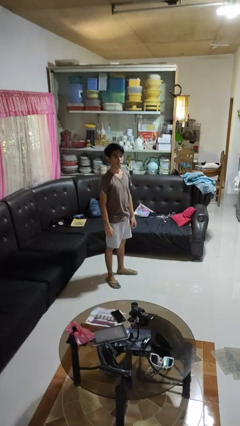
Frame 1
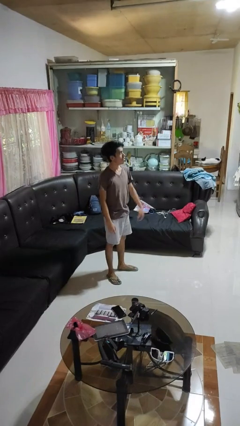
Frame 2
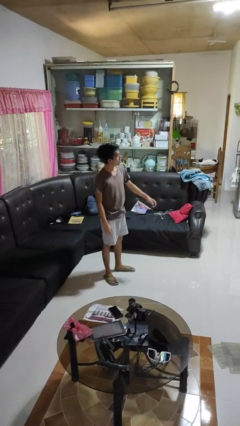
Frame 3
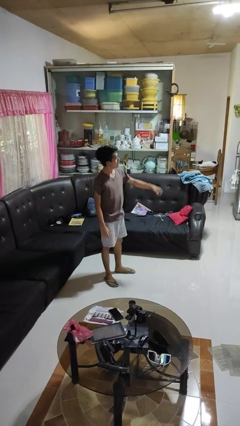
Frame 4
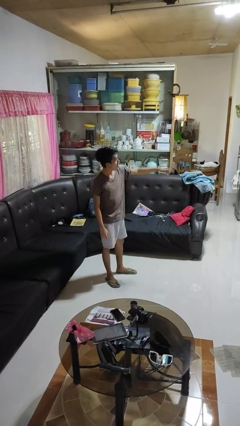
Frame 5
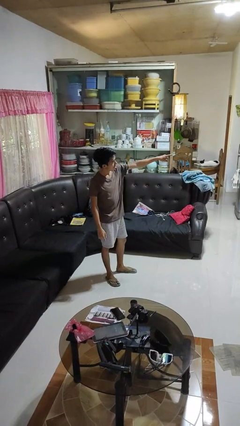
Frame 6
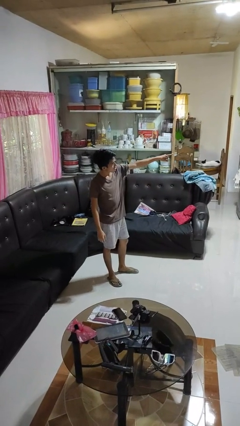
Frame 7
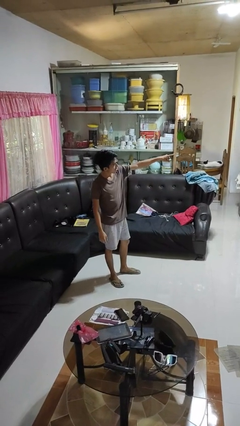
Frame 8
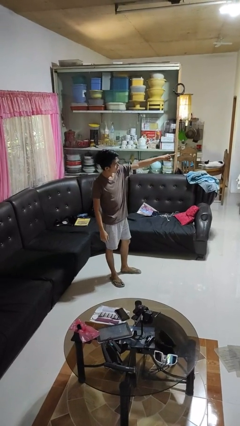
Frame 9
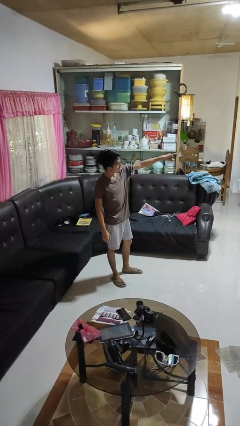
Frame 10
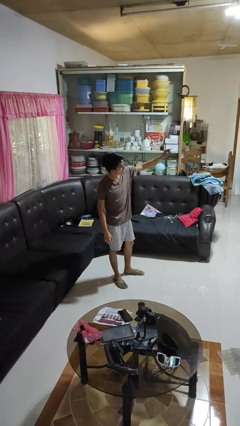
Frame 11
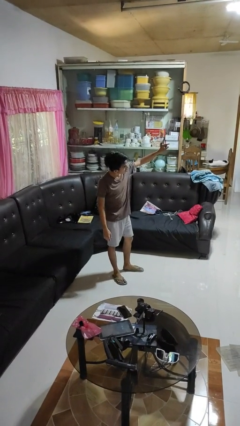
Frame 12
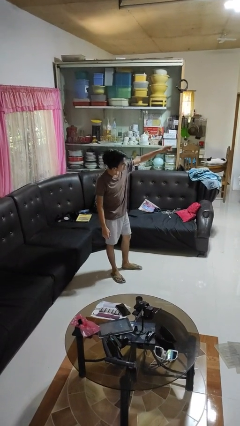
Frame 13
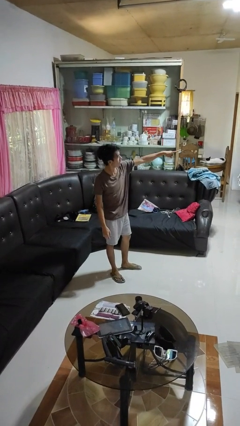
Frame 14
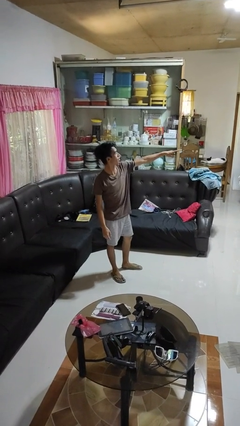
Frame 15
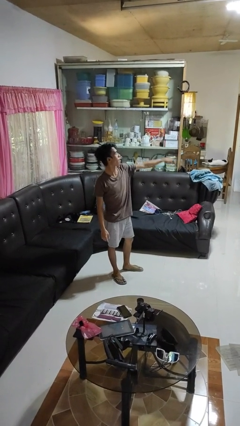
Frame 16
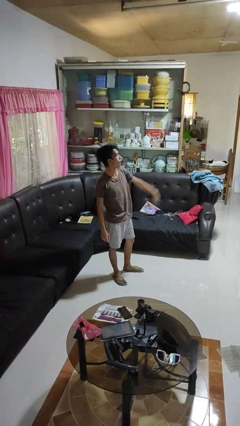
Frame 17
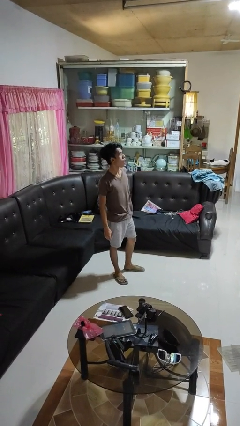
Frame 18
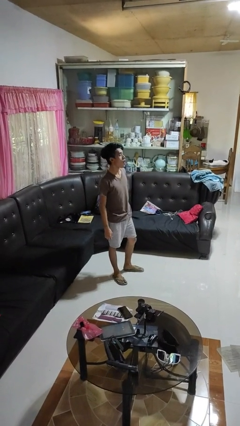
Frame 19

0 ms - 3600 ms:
person points at person

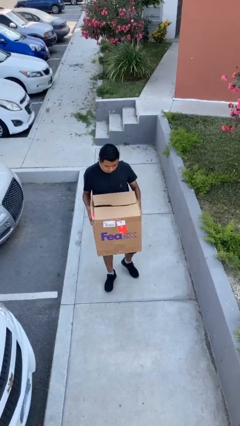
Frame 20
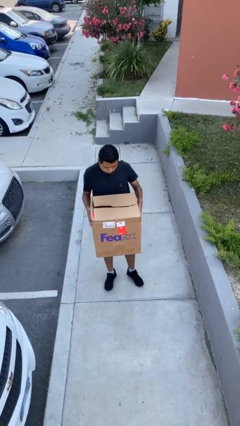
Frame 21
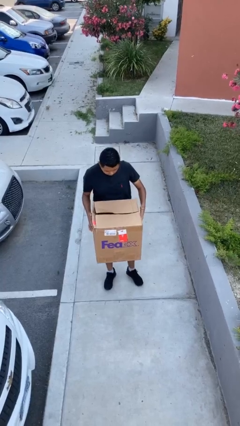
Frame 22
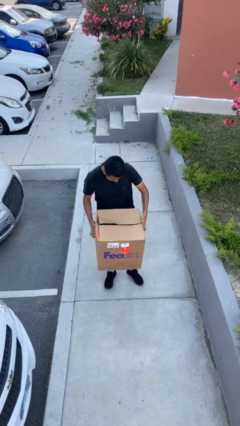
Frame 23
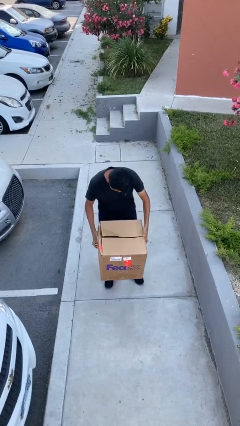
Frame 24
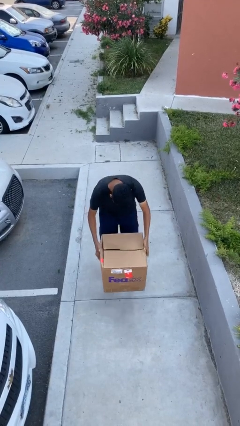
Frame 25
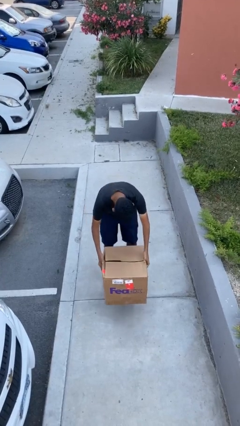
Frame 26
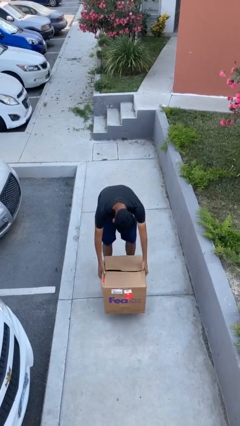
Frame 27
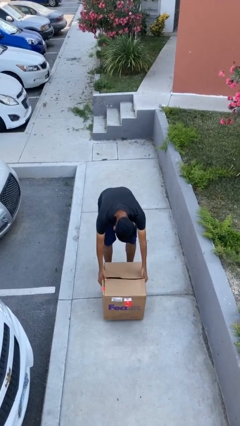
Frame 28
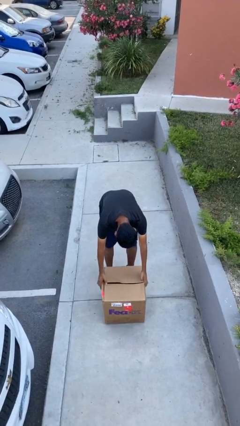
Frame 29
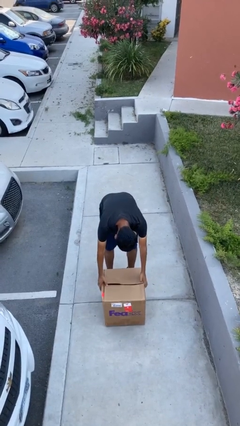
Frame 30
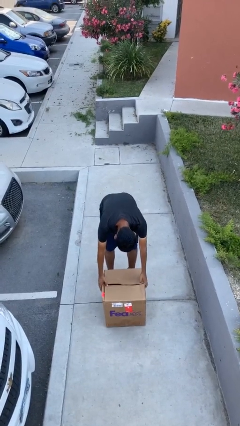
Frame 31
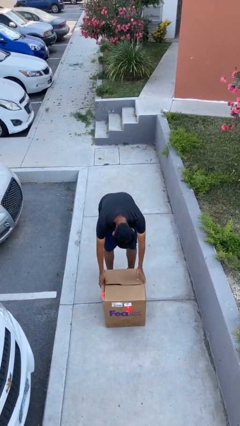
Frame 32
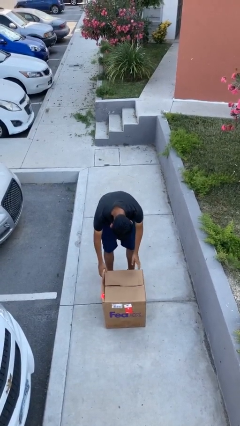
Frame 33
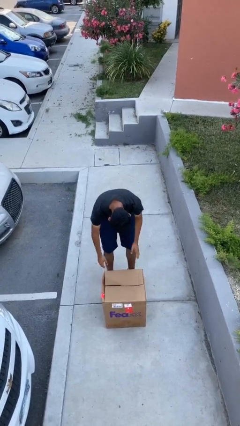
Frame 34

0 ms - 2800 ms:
person puts down object on floor

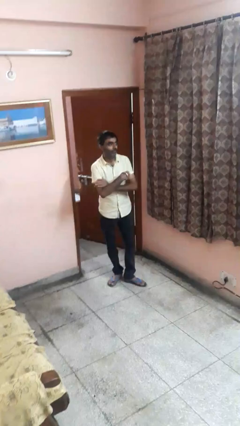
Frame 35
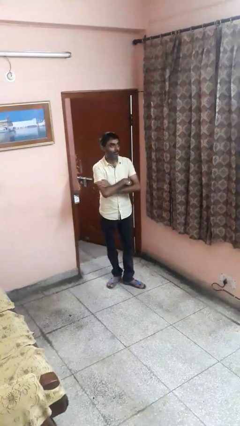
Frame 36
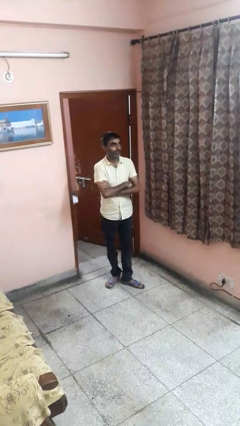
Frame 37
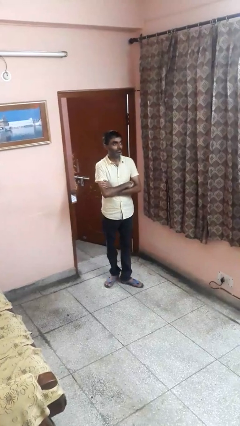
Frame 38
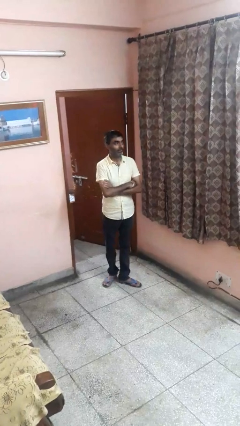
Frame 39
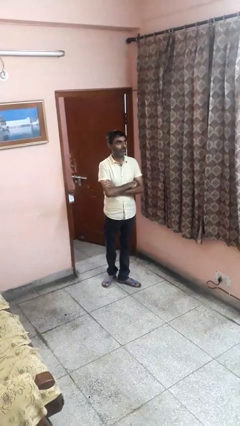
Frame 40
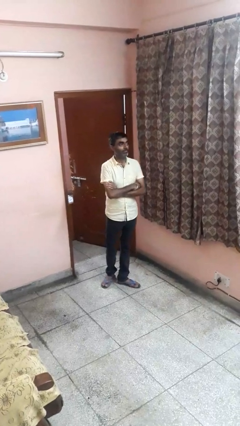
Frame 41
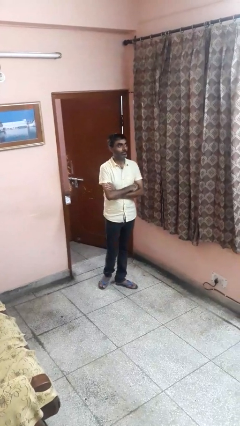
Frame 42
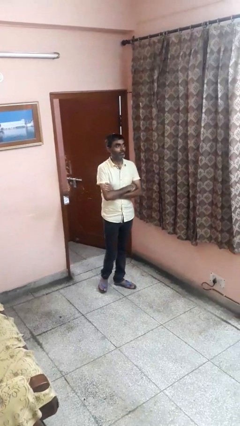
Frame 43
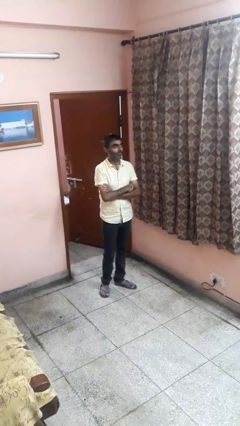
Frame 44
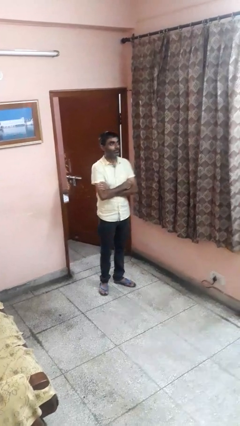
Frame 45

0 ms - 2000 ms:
person crosses arms

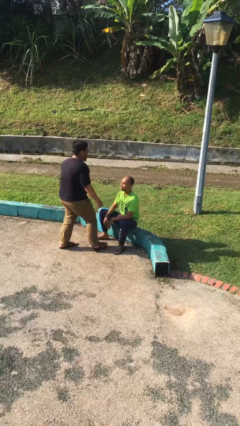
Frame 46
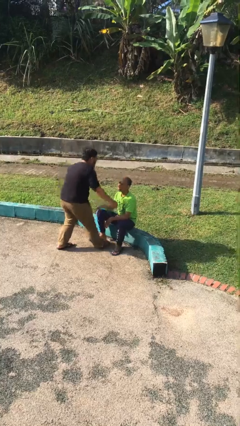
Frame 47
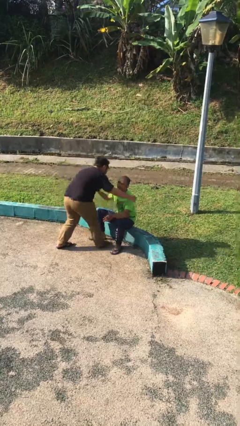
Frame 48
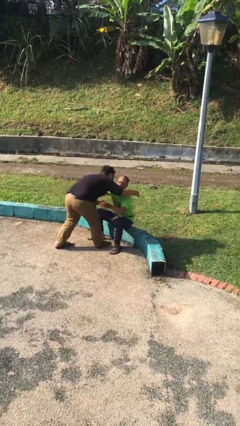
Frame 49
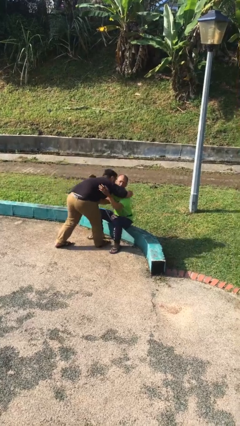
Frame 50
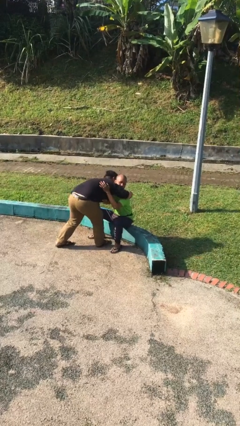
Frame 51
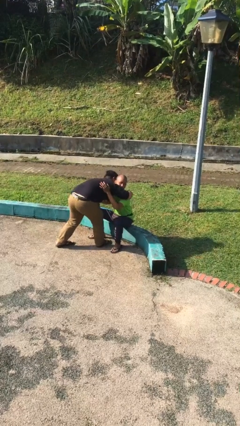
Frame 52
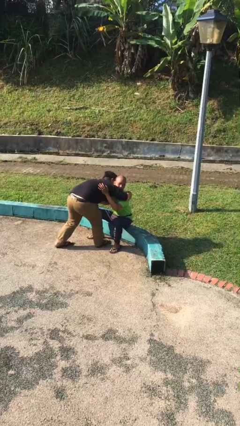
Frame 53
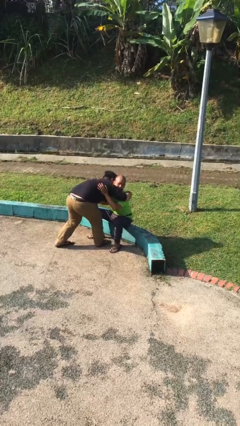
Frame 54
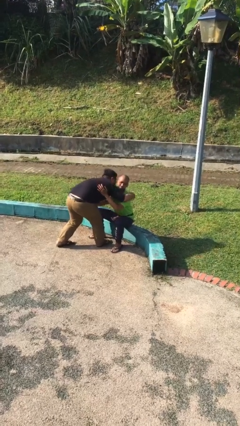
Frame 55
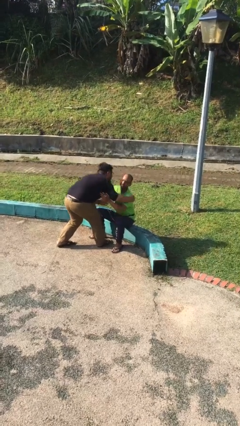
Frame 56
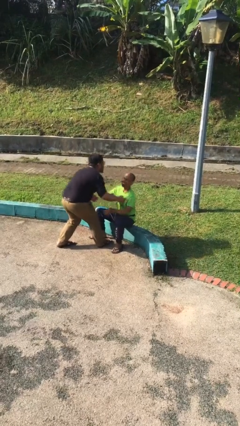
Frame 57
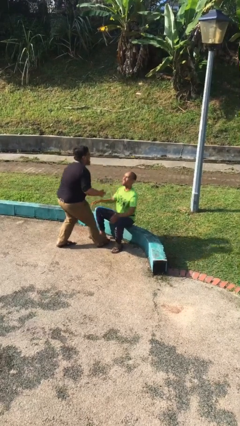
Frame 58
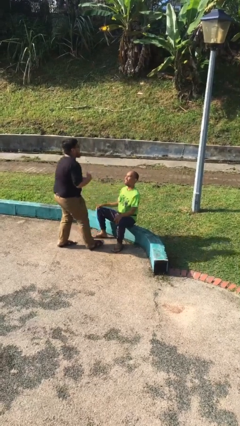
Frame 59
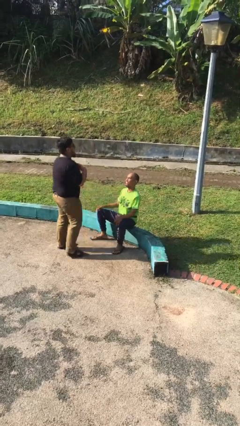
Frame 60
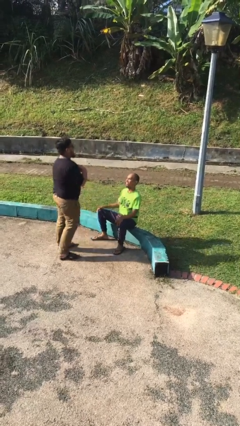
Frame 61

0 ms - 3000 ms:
person embraces person

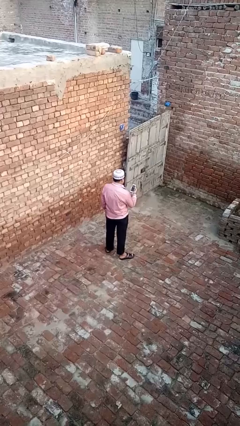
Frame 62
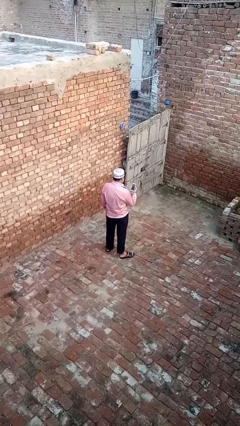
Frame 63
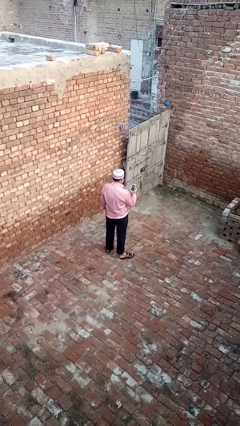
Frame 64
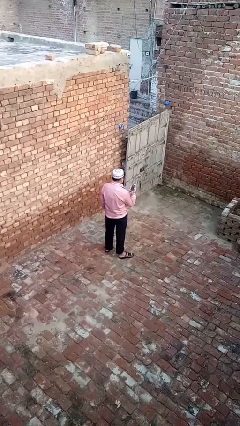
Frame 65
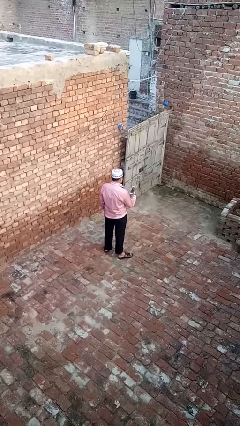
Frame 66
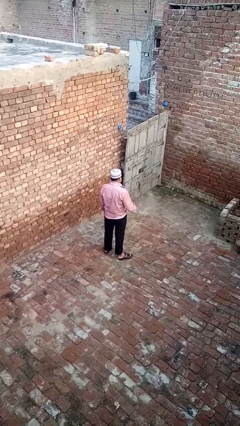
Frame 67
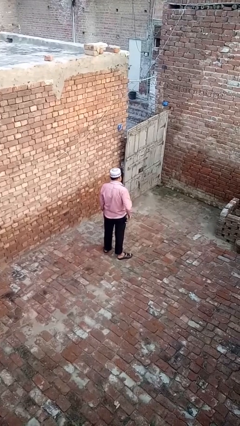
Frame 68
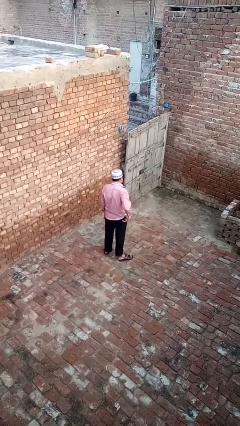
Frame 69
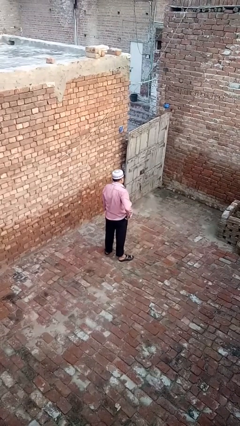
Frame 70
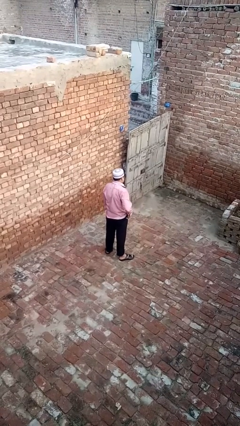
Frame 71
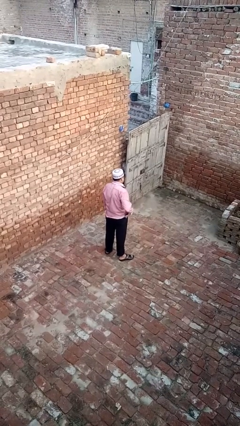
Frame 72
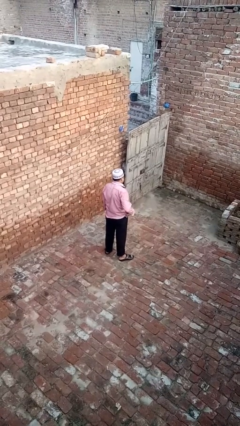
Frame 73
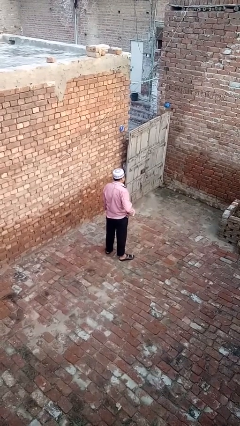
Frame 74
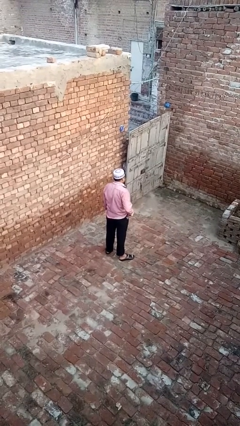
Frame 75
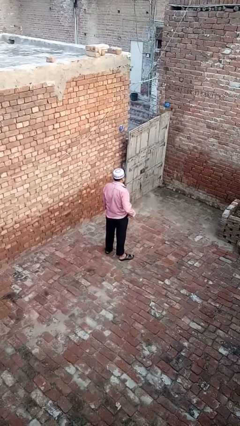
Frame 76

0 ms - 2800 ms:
person puts phone into pocket

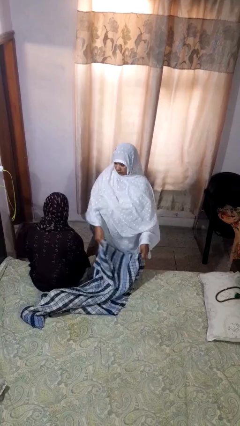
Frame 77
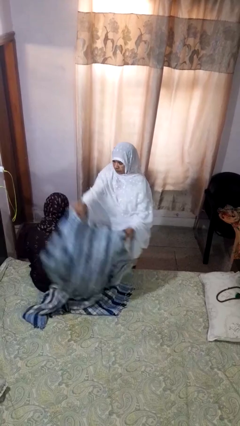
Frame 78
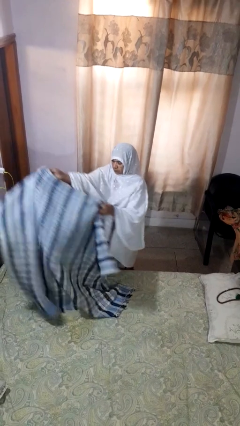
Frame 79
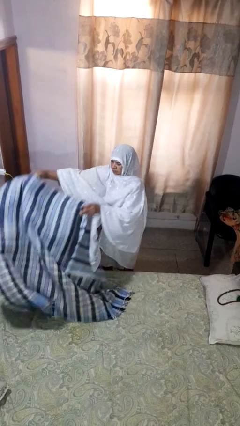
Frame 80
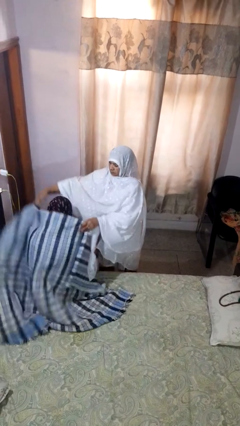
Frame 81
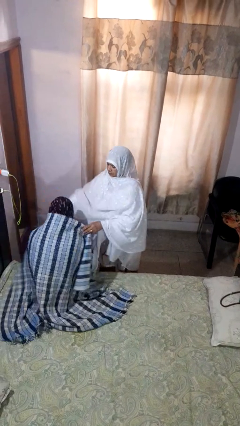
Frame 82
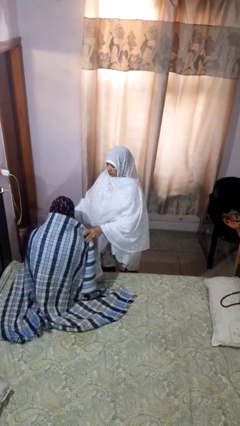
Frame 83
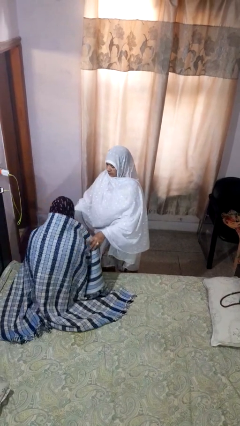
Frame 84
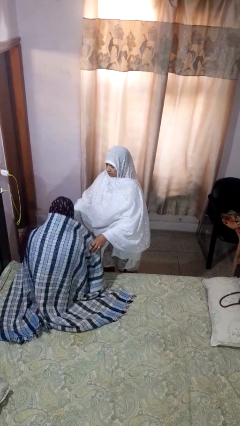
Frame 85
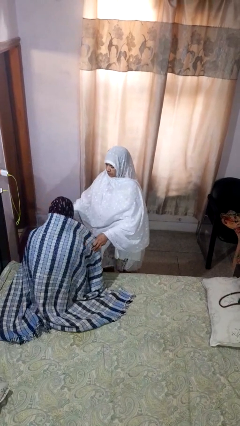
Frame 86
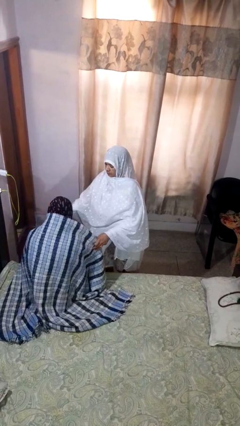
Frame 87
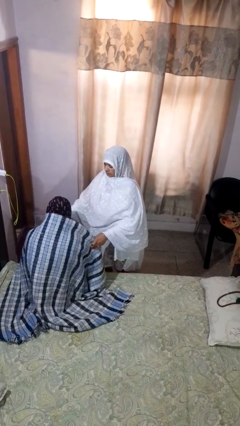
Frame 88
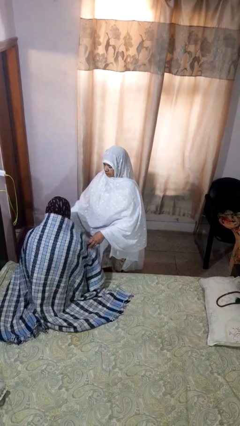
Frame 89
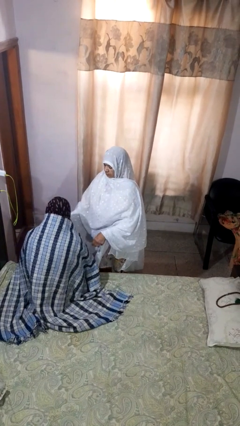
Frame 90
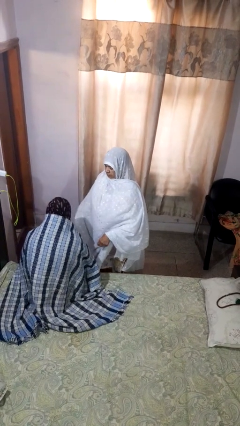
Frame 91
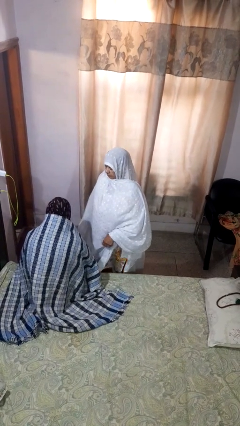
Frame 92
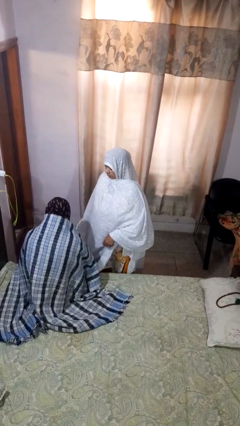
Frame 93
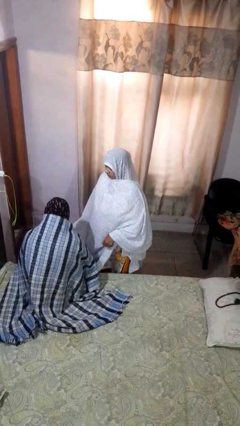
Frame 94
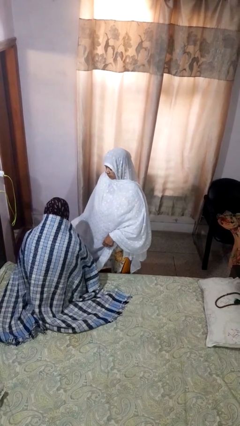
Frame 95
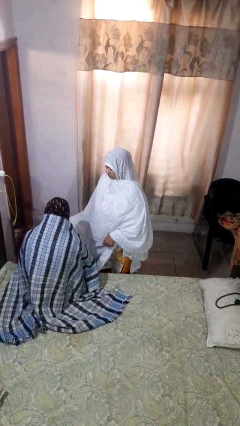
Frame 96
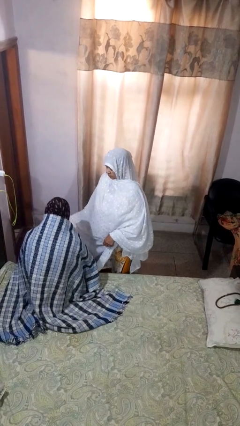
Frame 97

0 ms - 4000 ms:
person covers friend with blanket
